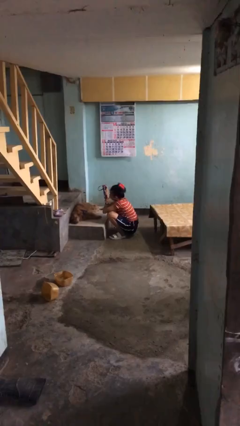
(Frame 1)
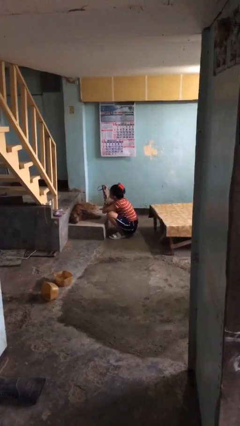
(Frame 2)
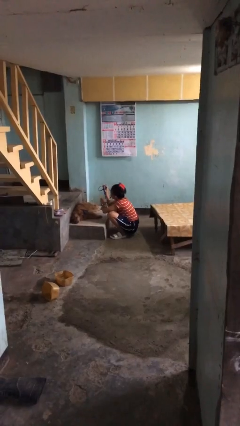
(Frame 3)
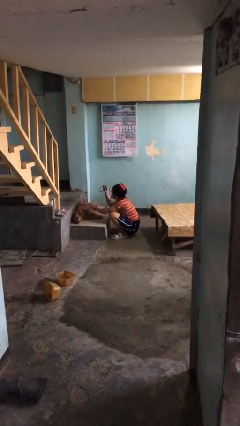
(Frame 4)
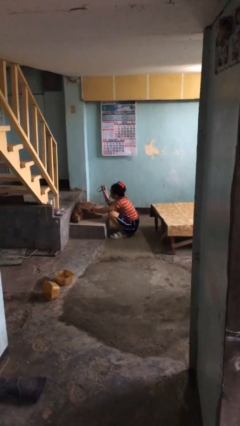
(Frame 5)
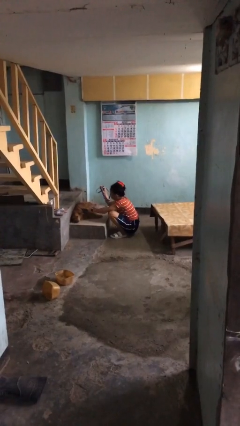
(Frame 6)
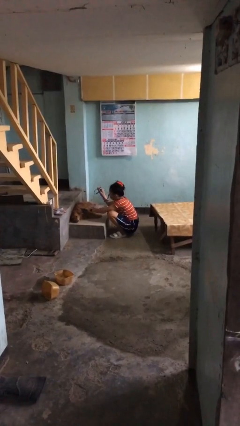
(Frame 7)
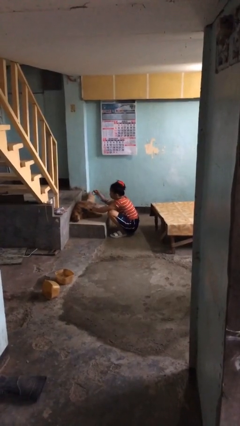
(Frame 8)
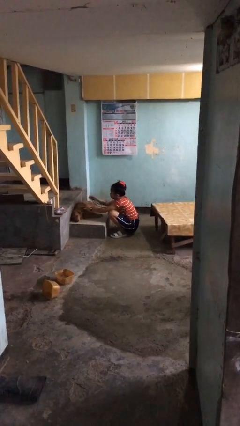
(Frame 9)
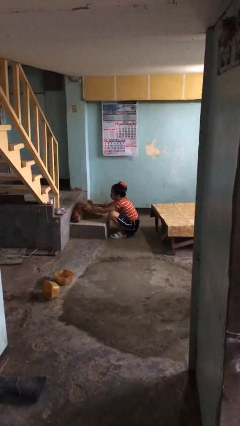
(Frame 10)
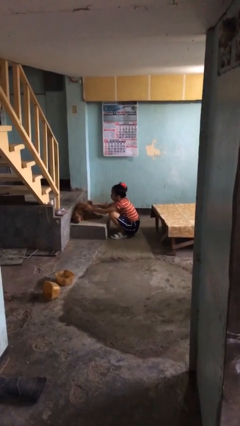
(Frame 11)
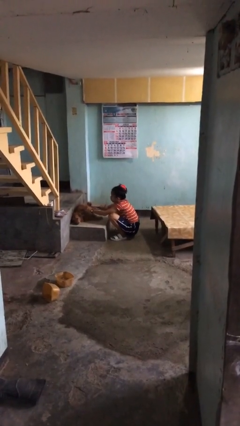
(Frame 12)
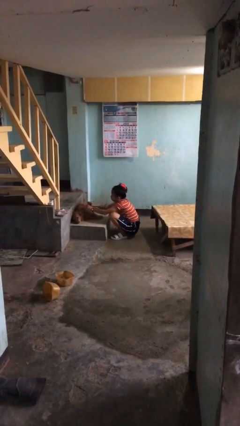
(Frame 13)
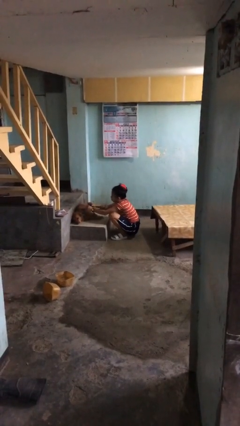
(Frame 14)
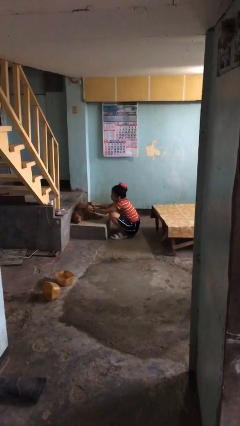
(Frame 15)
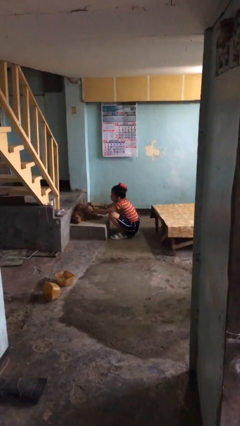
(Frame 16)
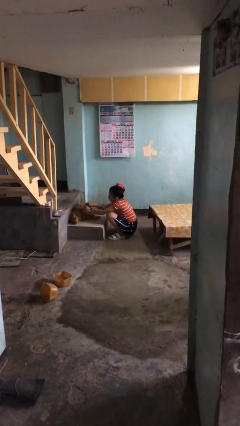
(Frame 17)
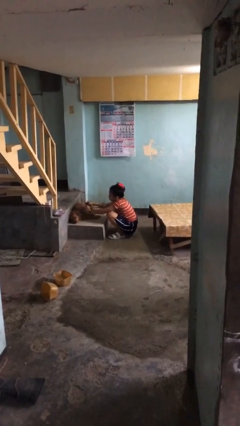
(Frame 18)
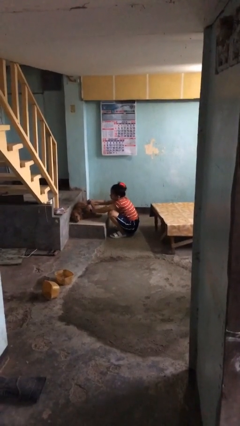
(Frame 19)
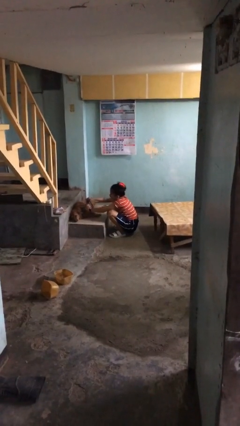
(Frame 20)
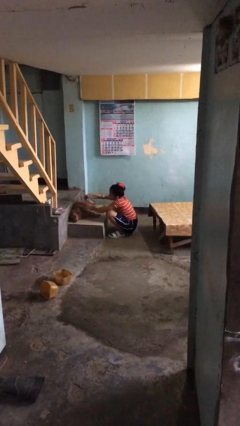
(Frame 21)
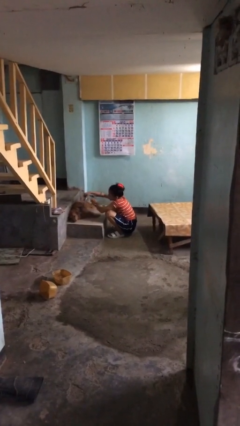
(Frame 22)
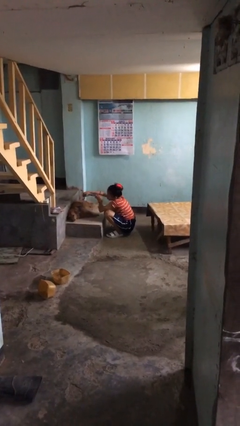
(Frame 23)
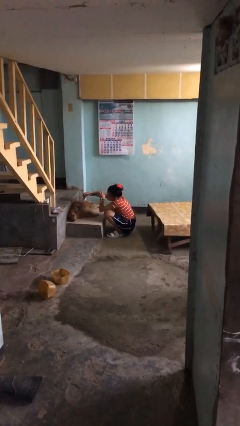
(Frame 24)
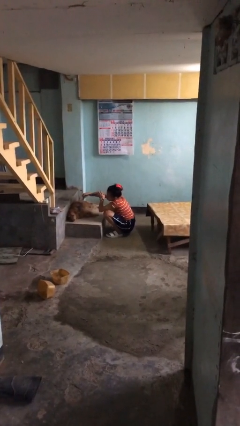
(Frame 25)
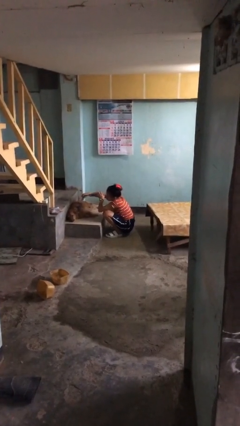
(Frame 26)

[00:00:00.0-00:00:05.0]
person attaches leash to dog

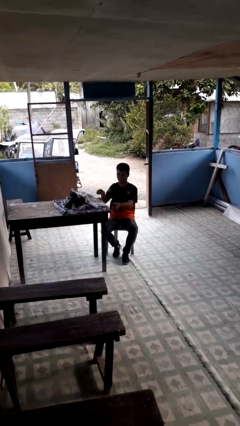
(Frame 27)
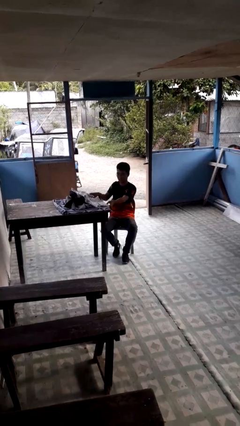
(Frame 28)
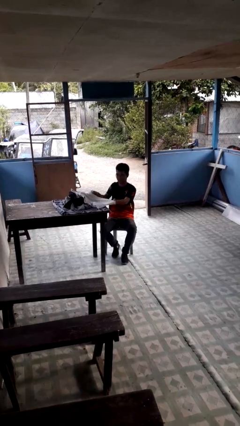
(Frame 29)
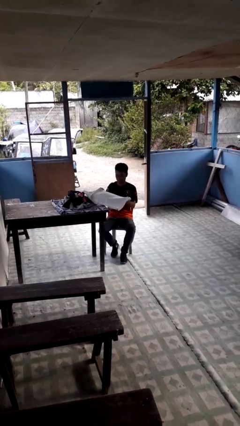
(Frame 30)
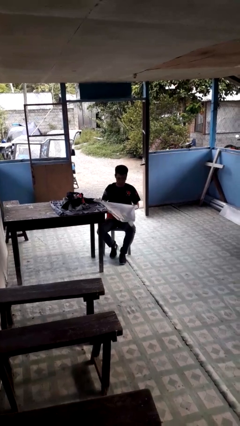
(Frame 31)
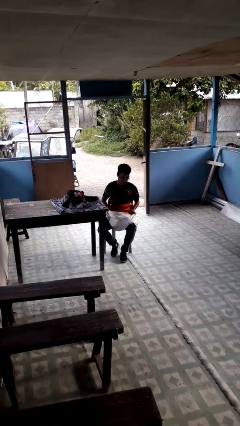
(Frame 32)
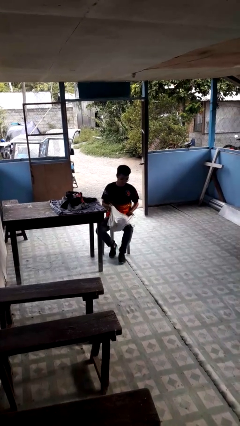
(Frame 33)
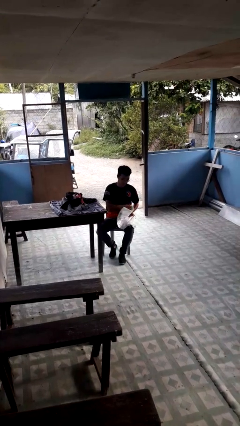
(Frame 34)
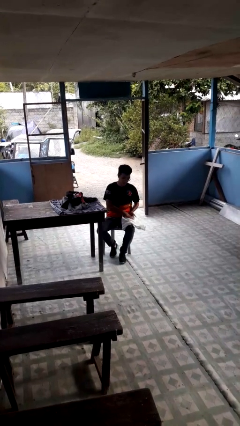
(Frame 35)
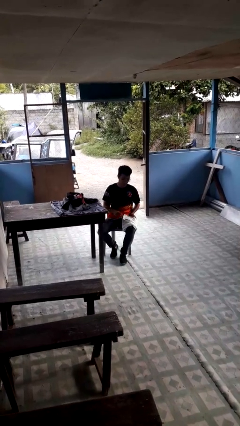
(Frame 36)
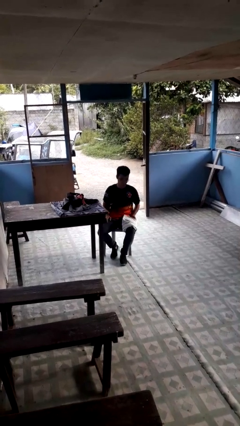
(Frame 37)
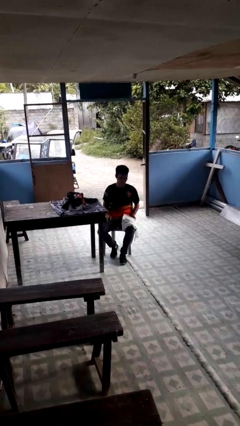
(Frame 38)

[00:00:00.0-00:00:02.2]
person folds shirt

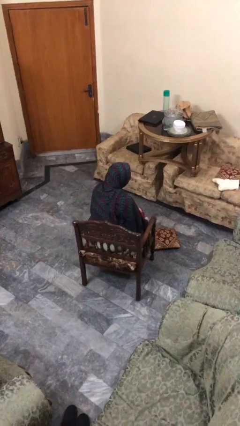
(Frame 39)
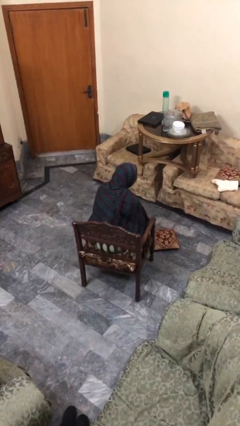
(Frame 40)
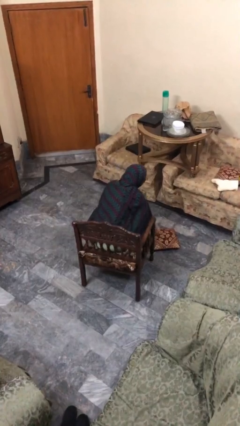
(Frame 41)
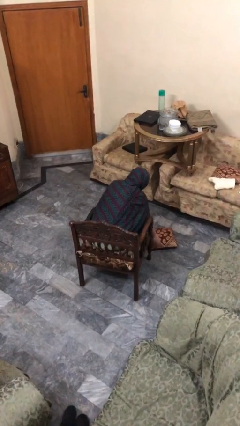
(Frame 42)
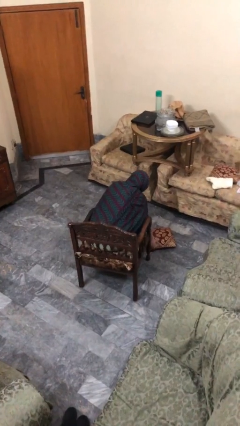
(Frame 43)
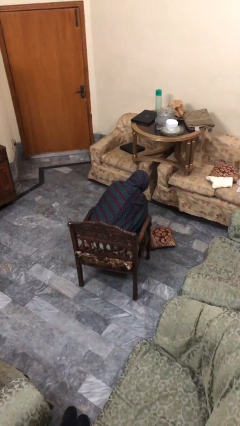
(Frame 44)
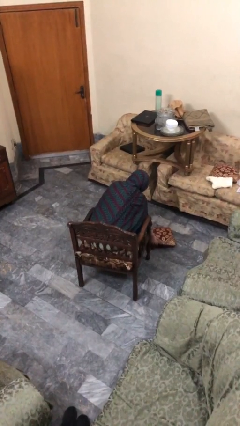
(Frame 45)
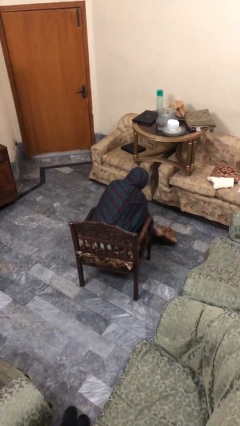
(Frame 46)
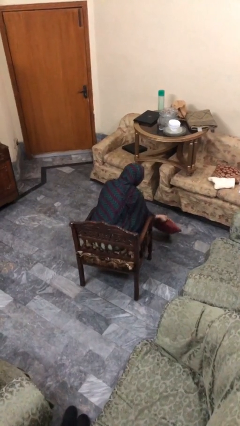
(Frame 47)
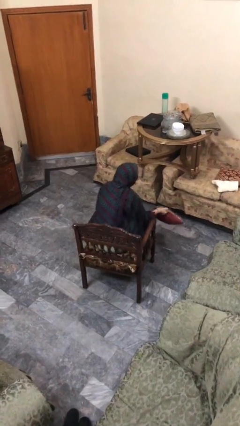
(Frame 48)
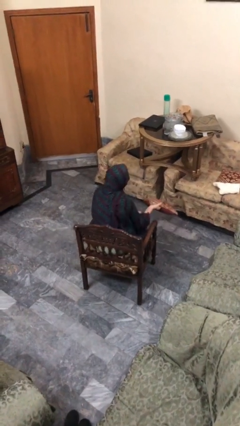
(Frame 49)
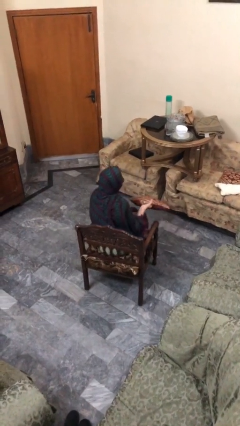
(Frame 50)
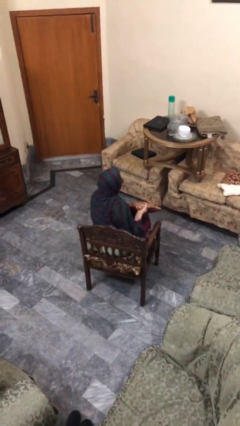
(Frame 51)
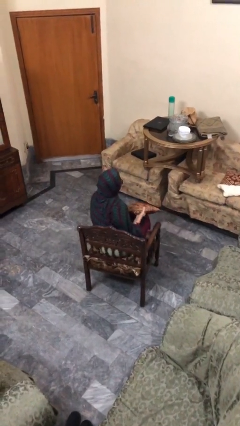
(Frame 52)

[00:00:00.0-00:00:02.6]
person picks up object from floor

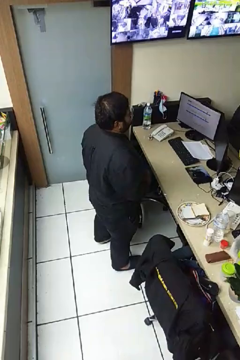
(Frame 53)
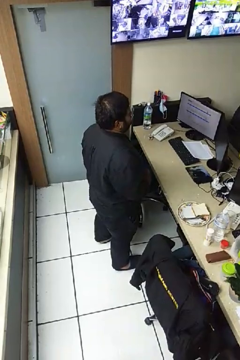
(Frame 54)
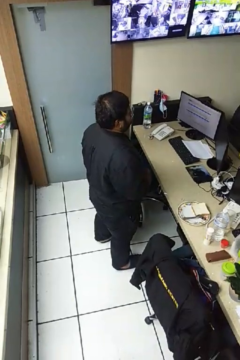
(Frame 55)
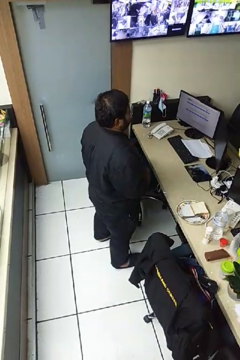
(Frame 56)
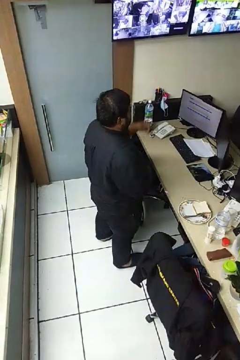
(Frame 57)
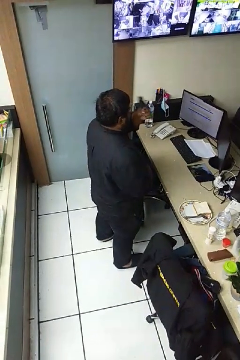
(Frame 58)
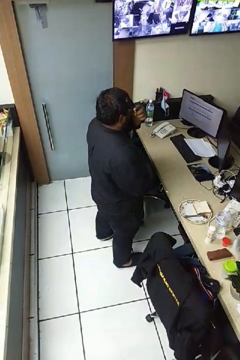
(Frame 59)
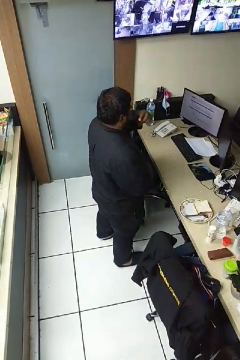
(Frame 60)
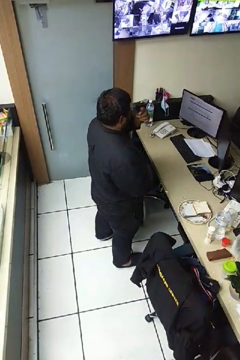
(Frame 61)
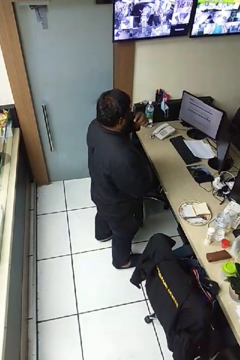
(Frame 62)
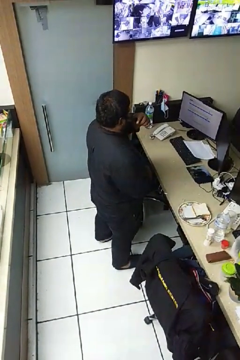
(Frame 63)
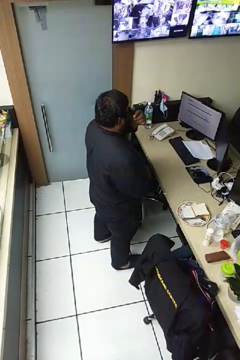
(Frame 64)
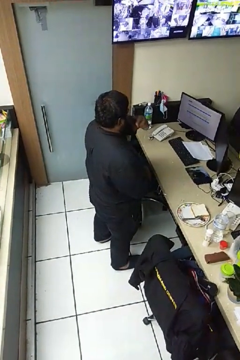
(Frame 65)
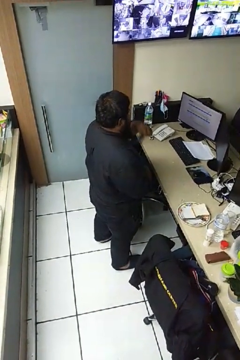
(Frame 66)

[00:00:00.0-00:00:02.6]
person brushes hair

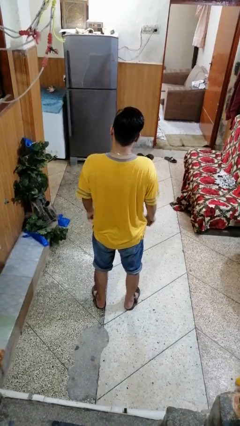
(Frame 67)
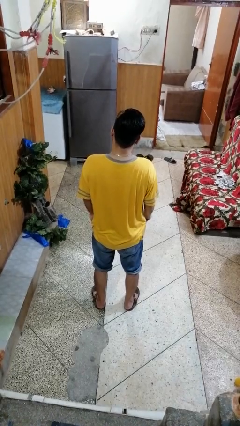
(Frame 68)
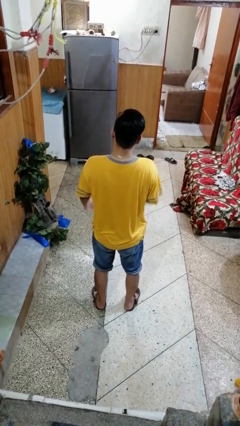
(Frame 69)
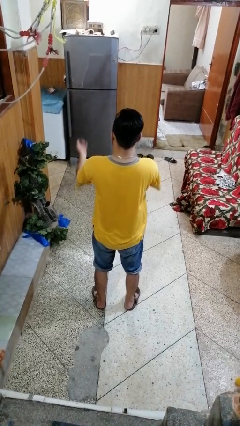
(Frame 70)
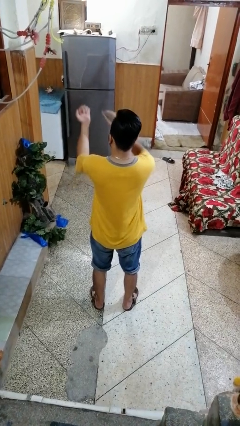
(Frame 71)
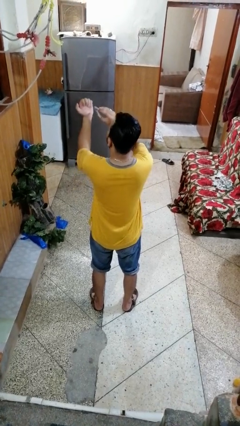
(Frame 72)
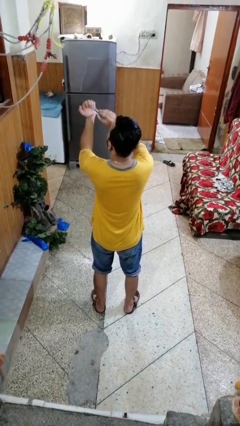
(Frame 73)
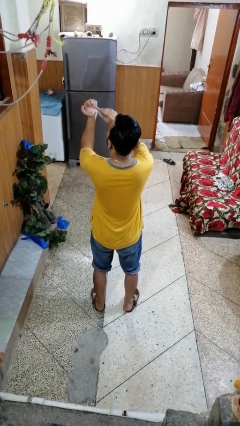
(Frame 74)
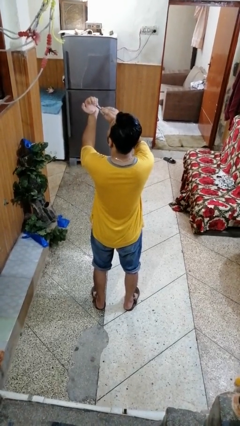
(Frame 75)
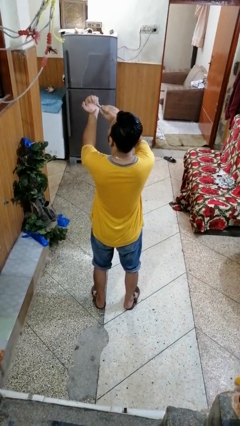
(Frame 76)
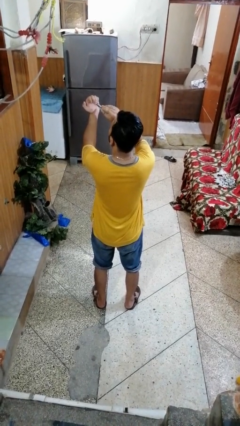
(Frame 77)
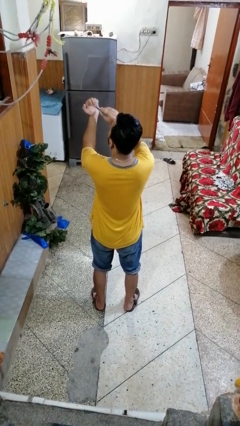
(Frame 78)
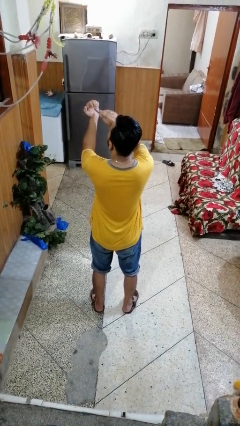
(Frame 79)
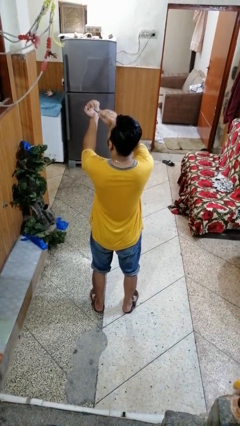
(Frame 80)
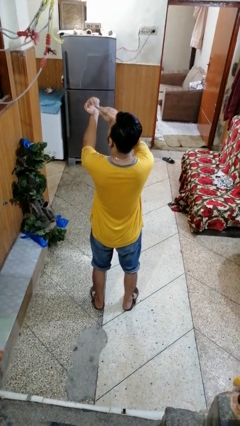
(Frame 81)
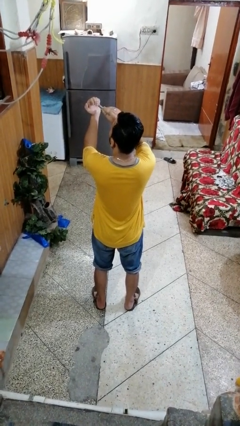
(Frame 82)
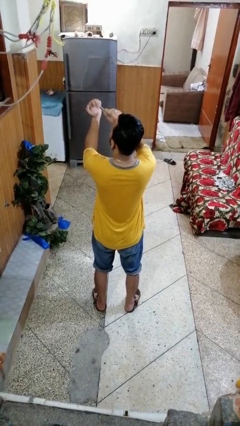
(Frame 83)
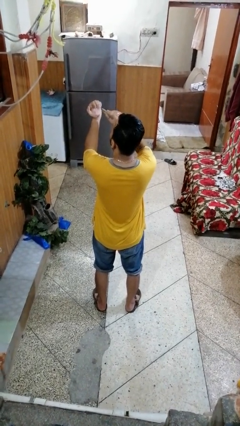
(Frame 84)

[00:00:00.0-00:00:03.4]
person clips fingernails

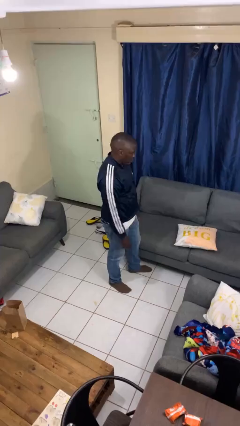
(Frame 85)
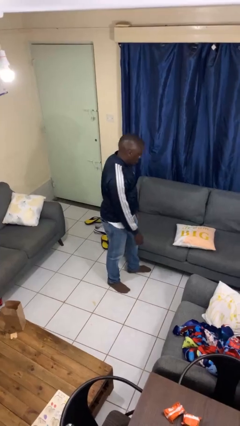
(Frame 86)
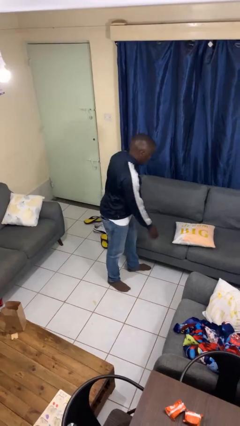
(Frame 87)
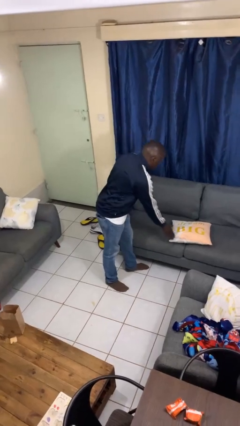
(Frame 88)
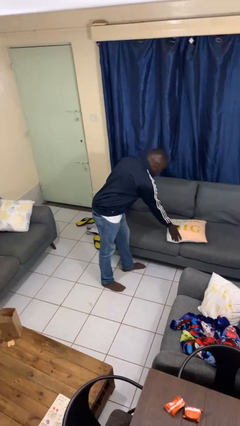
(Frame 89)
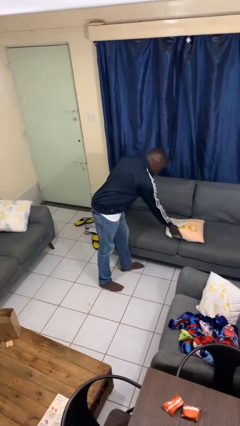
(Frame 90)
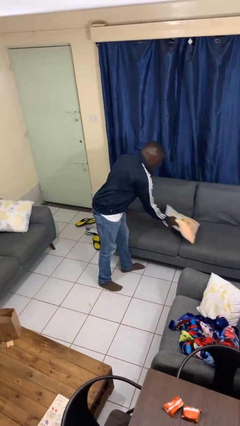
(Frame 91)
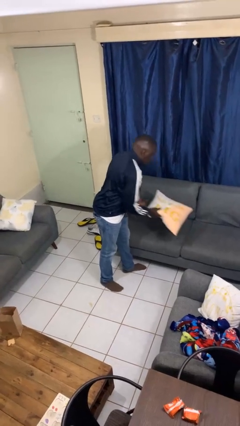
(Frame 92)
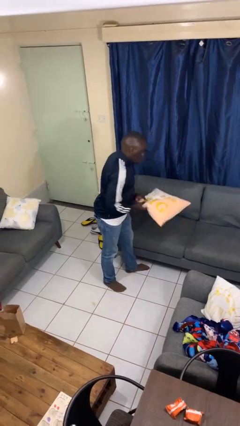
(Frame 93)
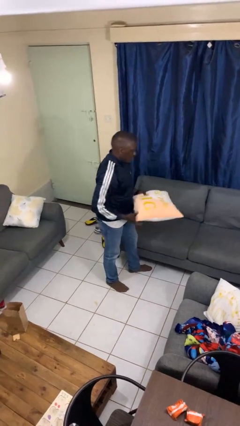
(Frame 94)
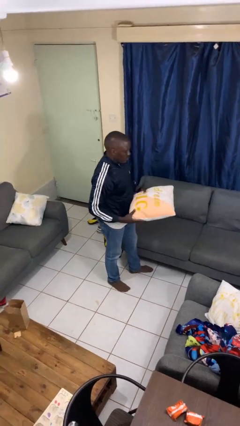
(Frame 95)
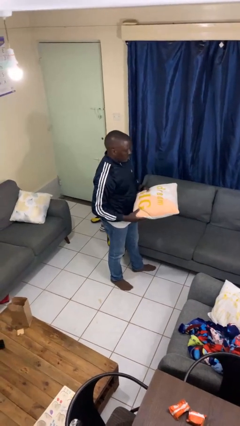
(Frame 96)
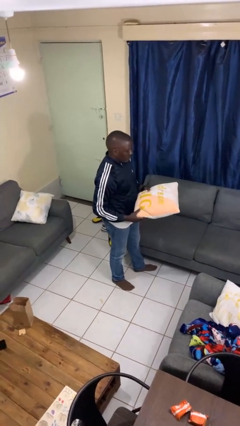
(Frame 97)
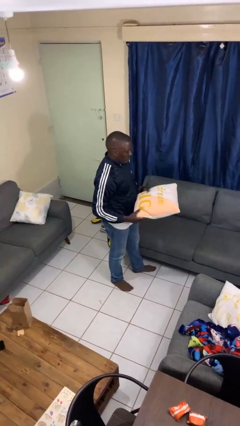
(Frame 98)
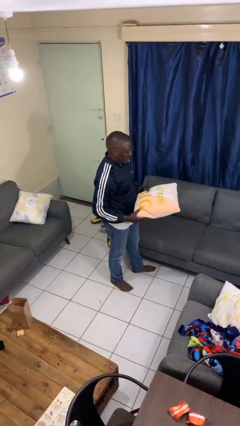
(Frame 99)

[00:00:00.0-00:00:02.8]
person picks up object from couch
